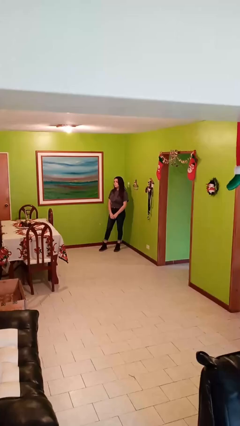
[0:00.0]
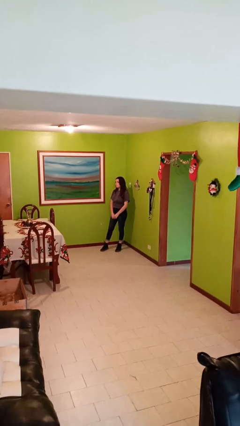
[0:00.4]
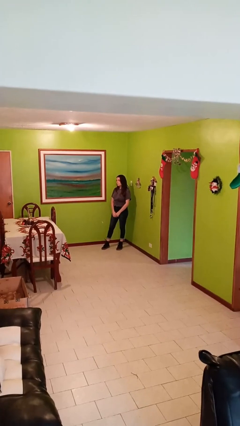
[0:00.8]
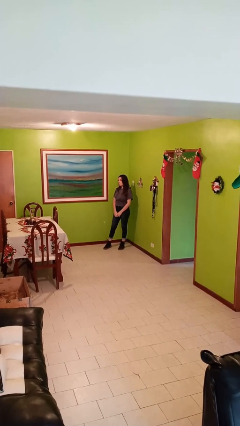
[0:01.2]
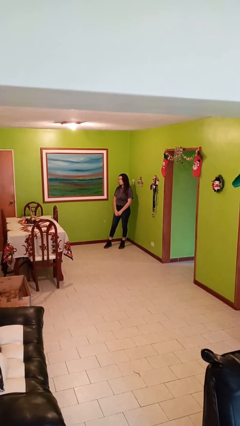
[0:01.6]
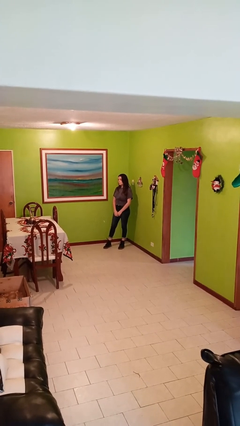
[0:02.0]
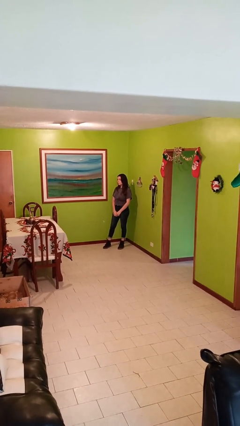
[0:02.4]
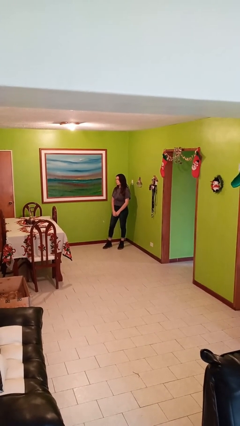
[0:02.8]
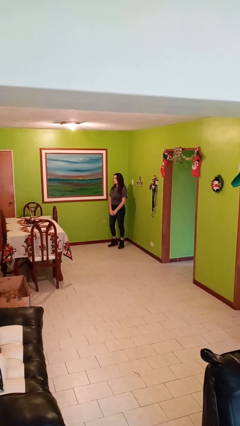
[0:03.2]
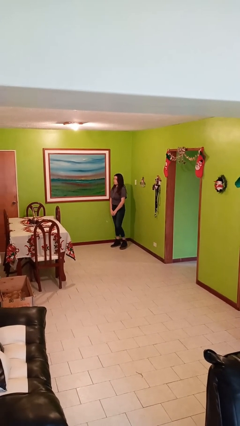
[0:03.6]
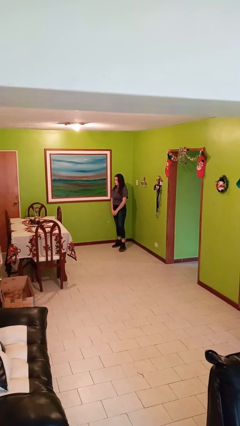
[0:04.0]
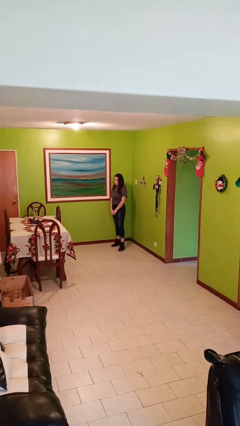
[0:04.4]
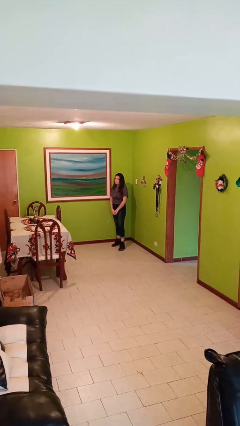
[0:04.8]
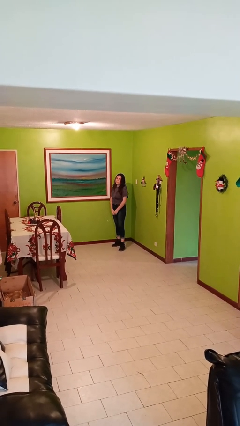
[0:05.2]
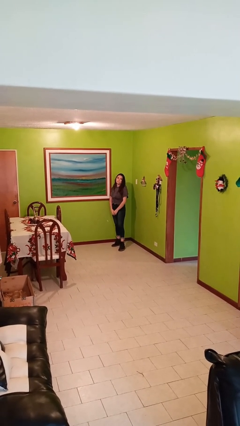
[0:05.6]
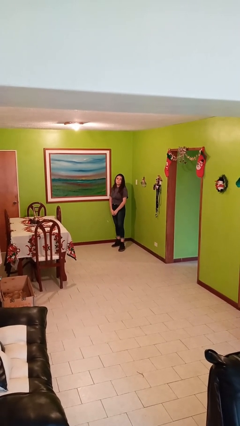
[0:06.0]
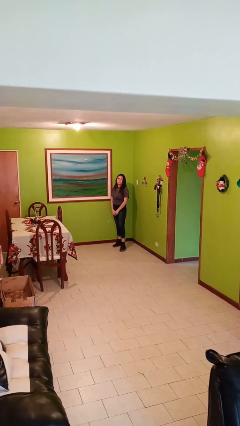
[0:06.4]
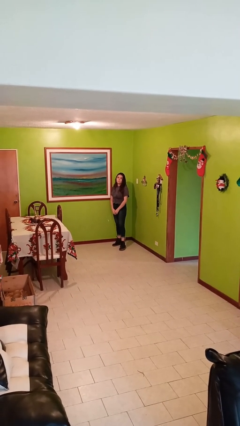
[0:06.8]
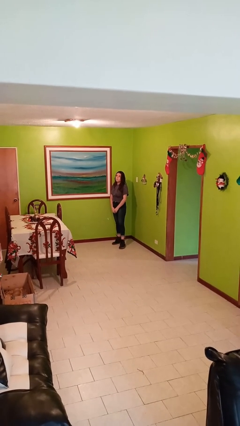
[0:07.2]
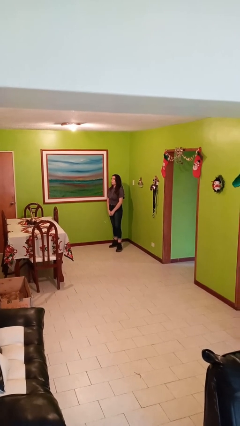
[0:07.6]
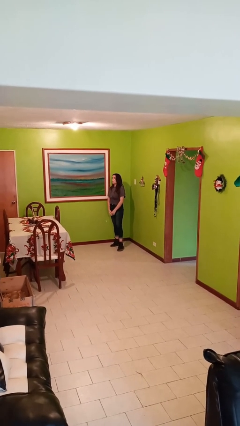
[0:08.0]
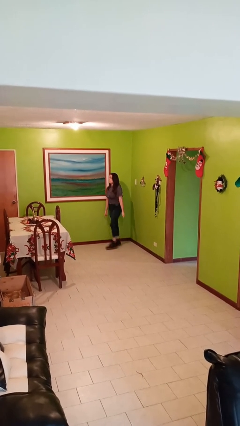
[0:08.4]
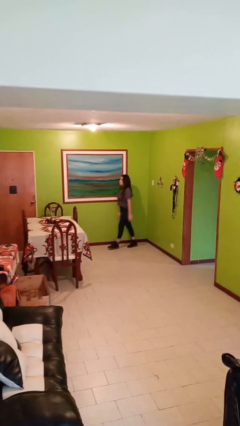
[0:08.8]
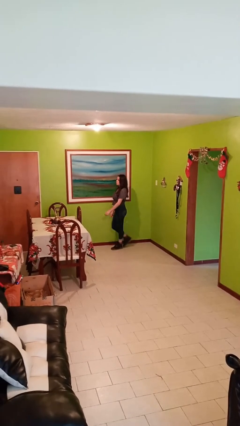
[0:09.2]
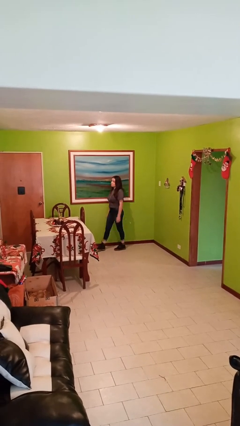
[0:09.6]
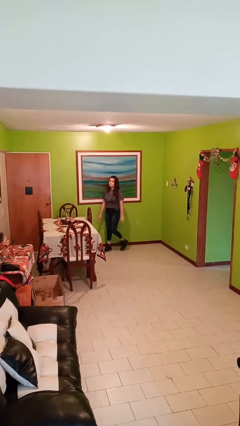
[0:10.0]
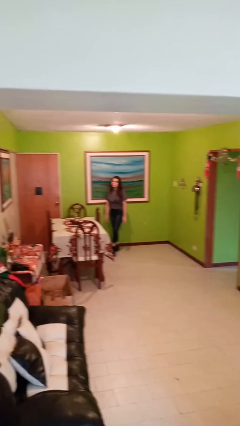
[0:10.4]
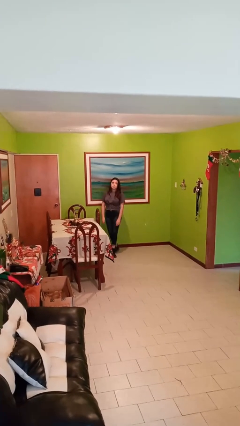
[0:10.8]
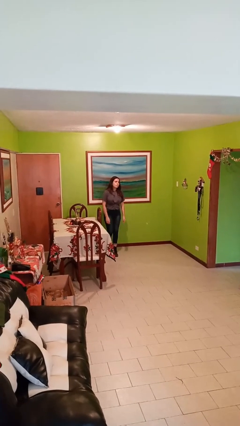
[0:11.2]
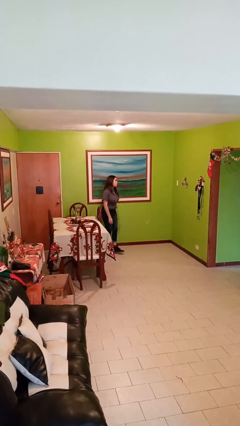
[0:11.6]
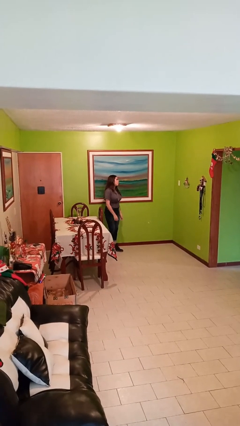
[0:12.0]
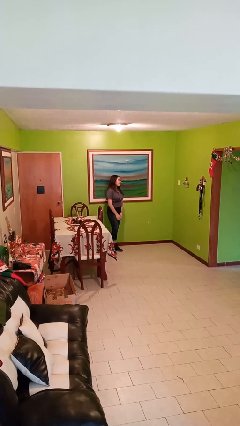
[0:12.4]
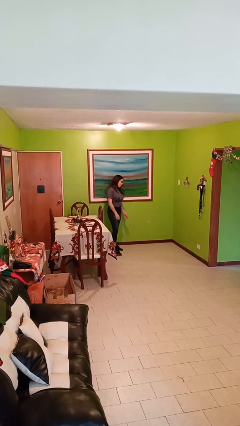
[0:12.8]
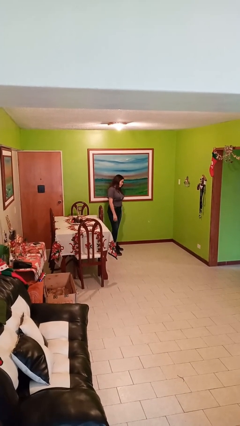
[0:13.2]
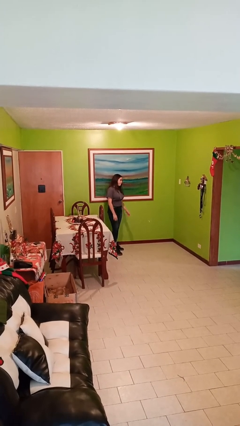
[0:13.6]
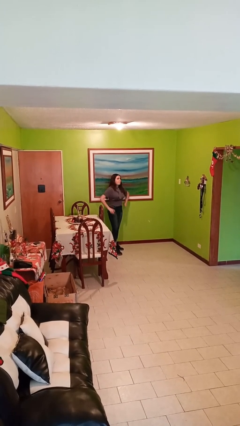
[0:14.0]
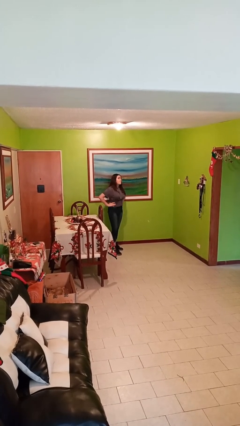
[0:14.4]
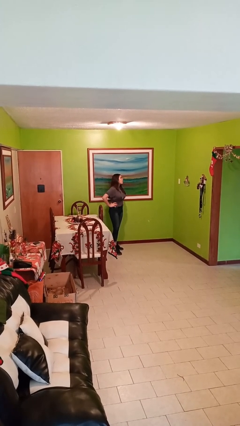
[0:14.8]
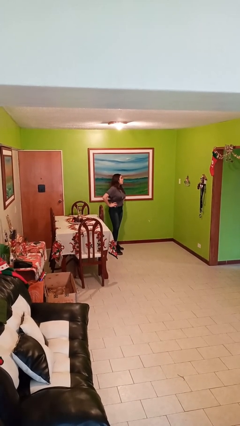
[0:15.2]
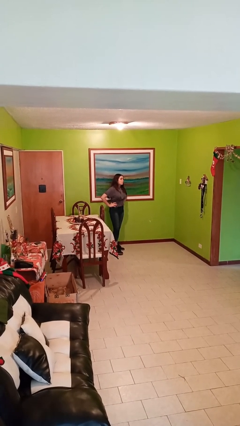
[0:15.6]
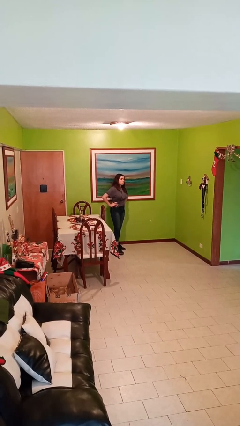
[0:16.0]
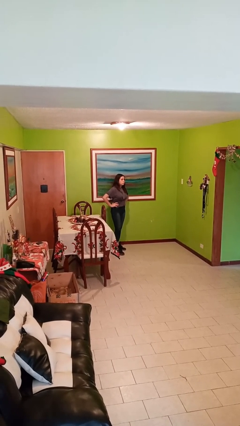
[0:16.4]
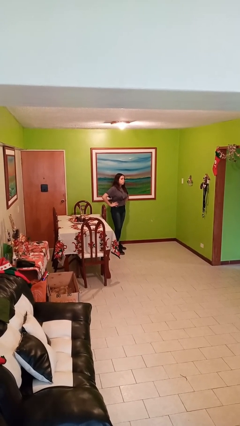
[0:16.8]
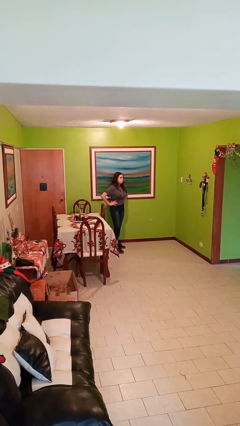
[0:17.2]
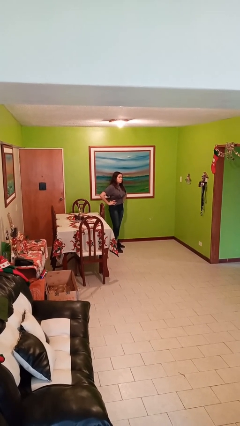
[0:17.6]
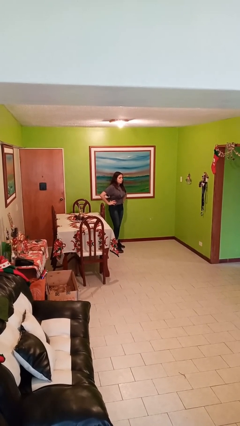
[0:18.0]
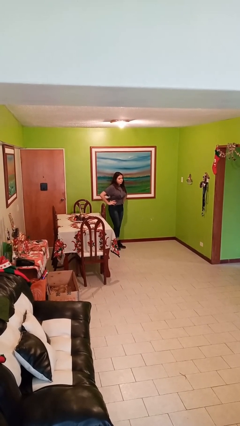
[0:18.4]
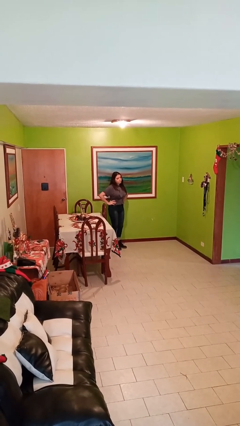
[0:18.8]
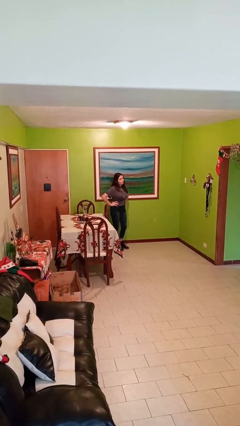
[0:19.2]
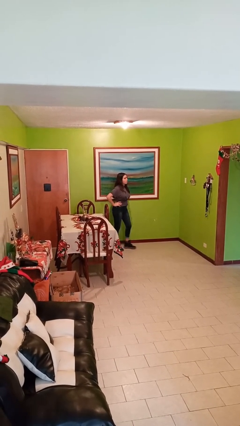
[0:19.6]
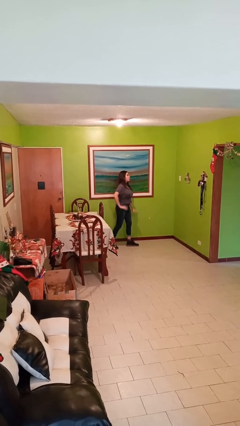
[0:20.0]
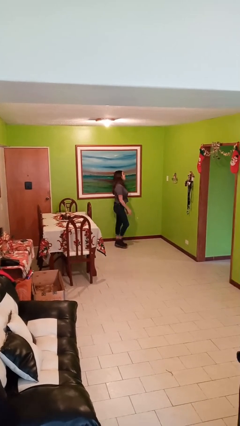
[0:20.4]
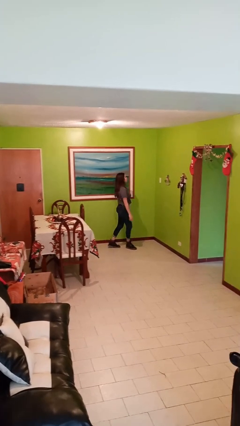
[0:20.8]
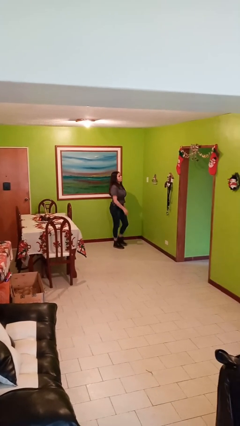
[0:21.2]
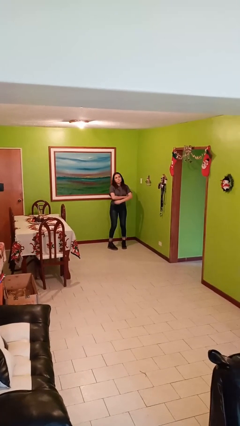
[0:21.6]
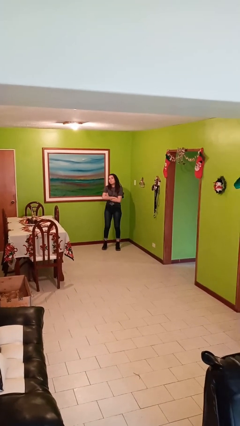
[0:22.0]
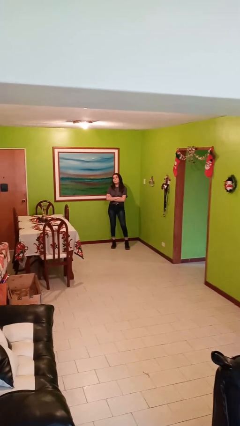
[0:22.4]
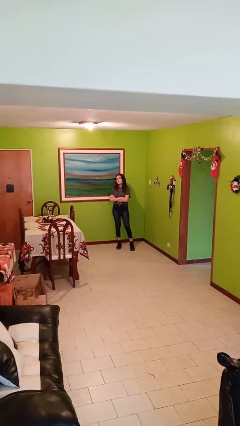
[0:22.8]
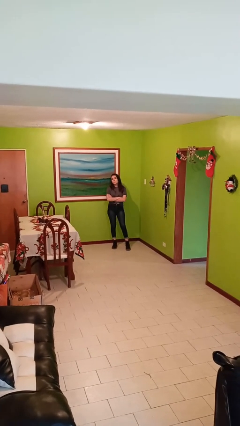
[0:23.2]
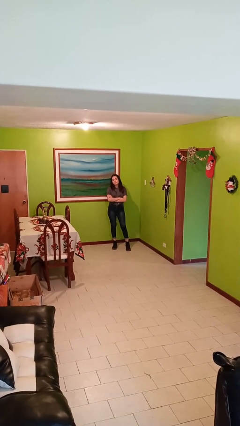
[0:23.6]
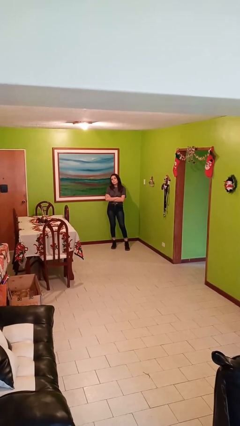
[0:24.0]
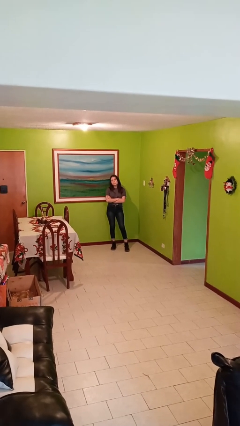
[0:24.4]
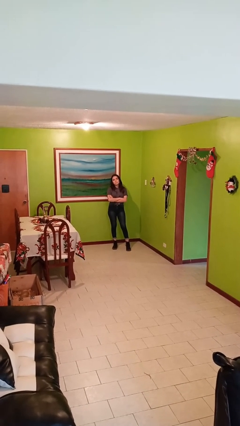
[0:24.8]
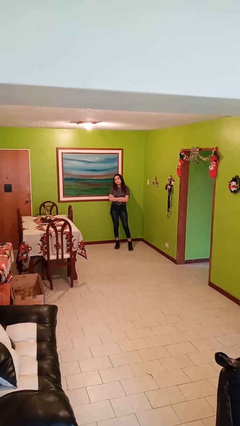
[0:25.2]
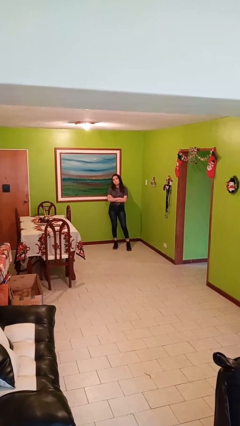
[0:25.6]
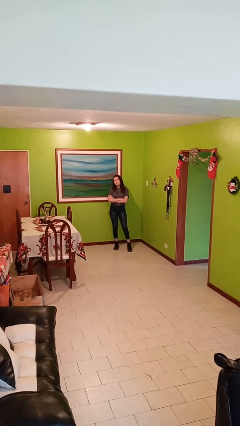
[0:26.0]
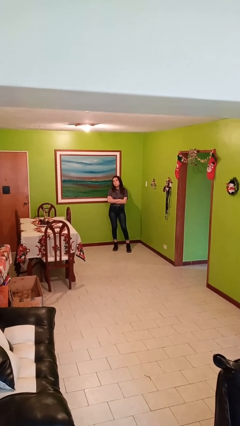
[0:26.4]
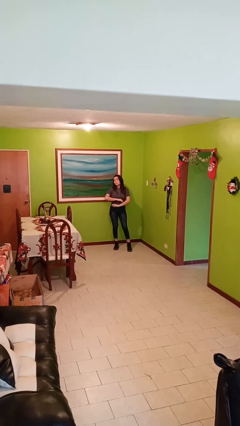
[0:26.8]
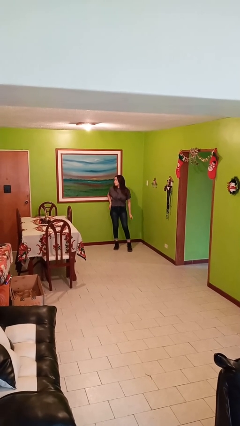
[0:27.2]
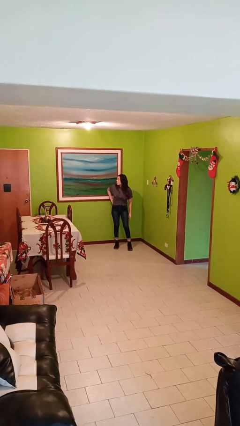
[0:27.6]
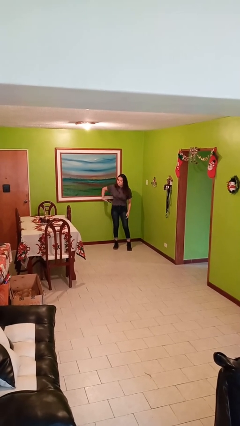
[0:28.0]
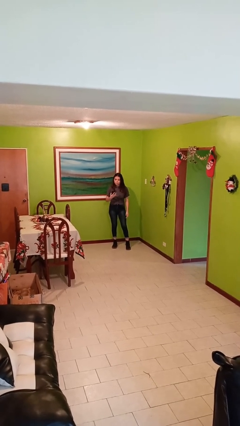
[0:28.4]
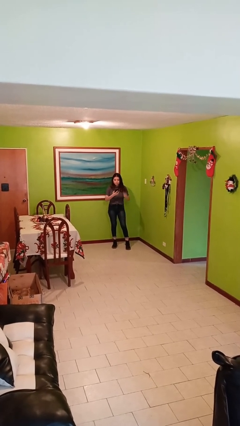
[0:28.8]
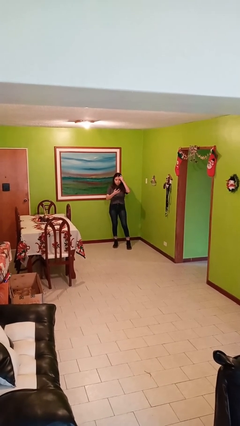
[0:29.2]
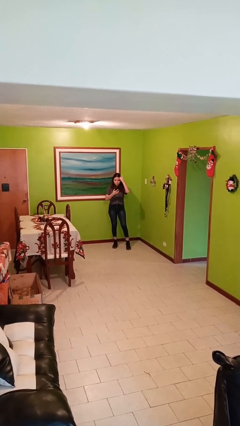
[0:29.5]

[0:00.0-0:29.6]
person walks

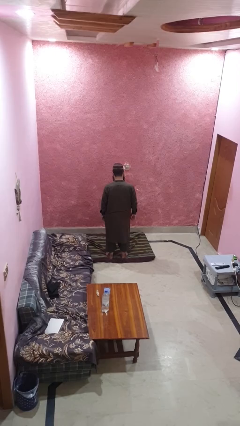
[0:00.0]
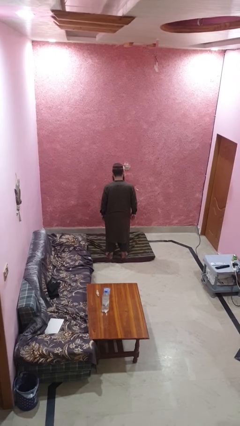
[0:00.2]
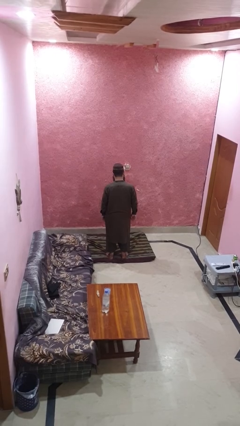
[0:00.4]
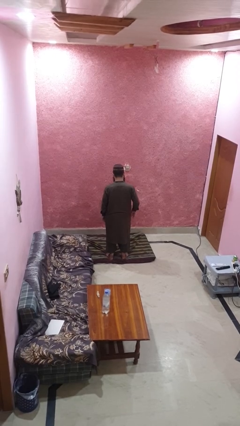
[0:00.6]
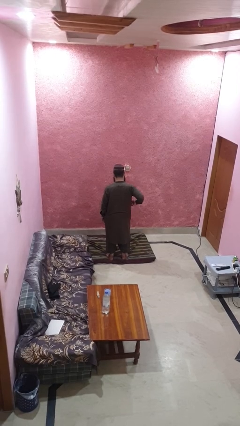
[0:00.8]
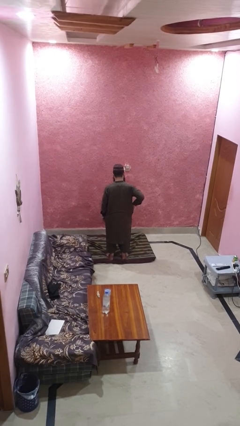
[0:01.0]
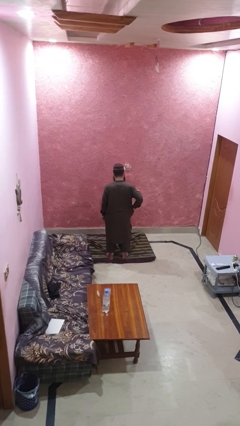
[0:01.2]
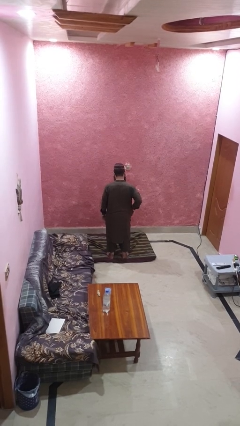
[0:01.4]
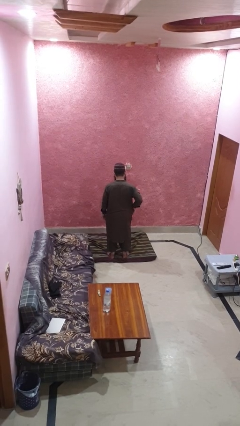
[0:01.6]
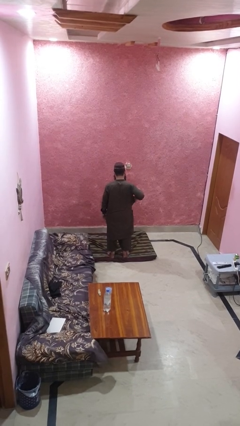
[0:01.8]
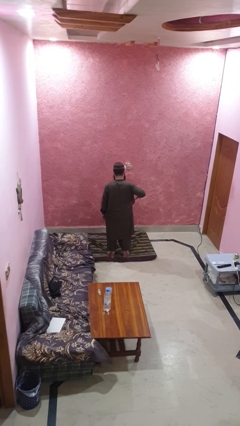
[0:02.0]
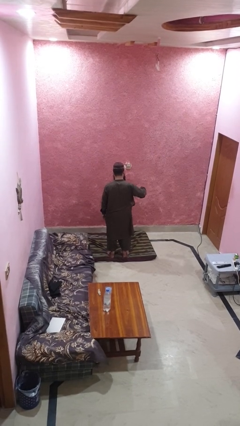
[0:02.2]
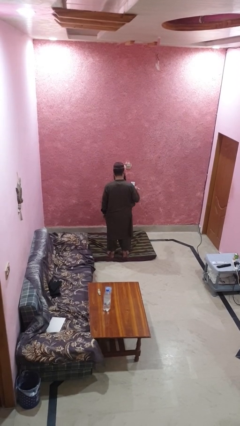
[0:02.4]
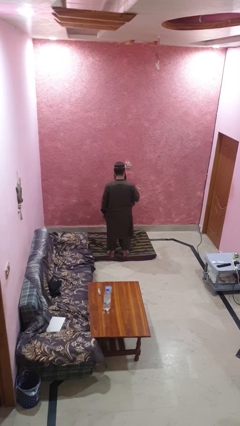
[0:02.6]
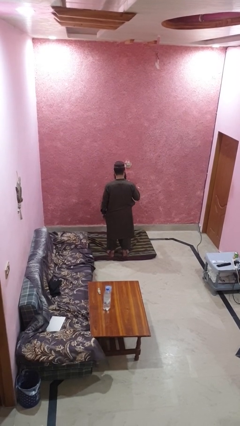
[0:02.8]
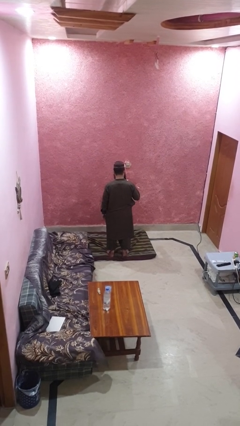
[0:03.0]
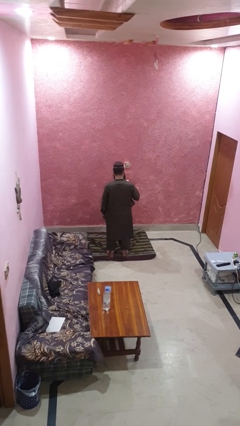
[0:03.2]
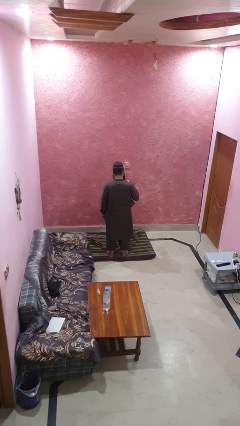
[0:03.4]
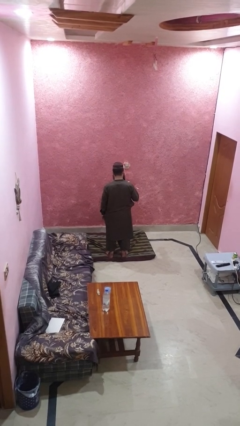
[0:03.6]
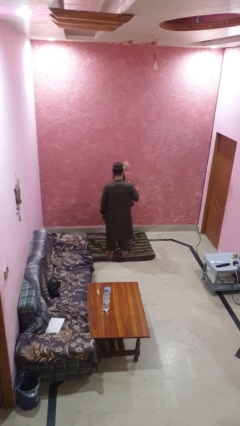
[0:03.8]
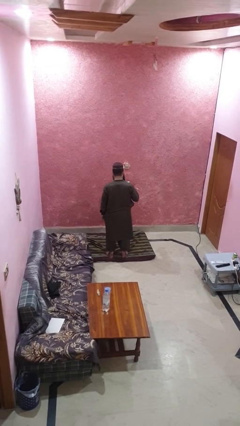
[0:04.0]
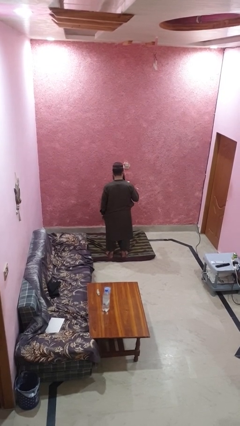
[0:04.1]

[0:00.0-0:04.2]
person takes phone from pocket
